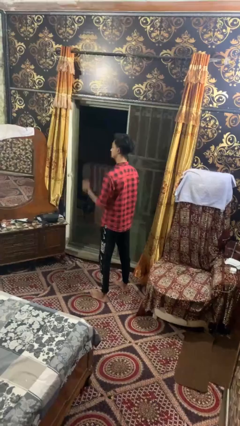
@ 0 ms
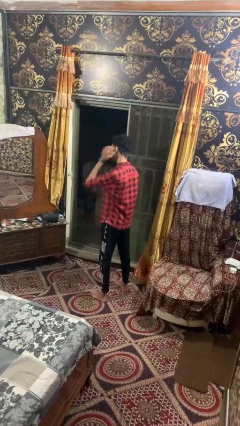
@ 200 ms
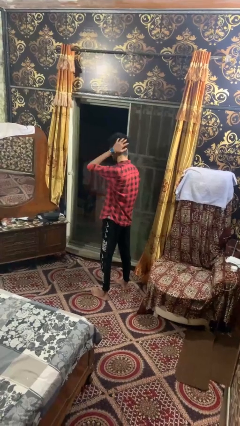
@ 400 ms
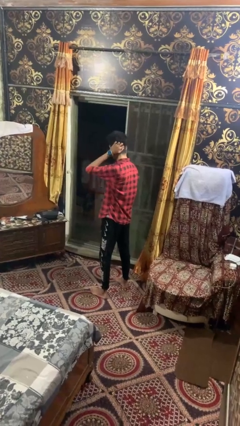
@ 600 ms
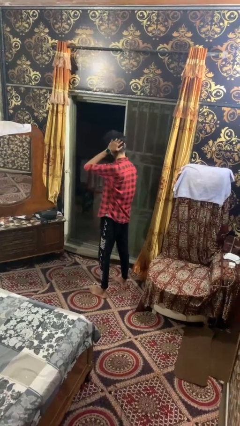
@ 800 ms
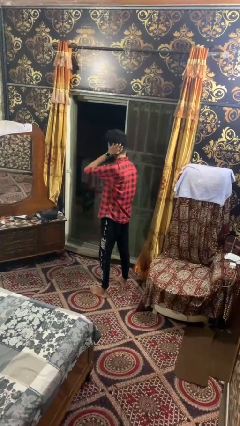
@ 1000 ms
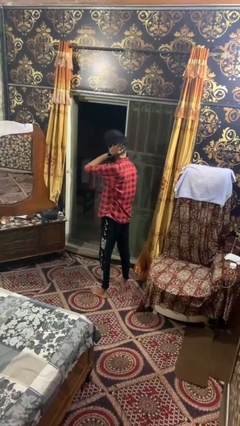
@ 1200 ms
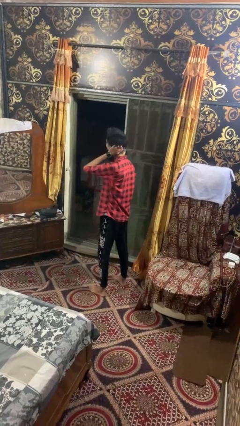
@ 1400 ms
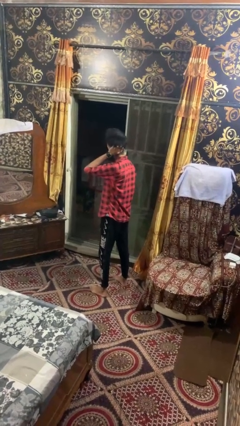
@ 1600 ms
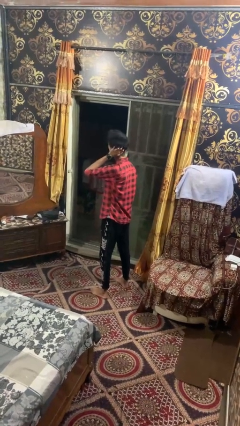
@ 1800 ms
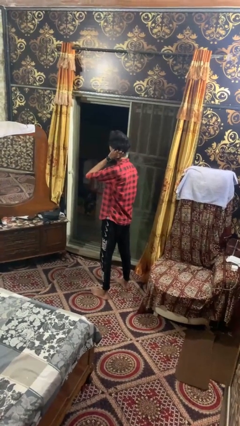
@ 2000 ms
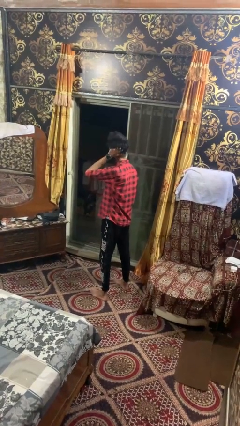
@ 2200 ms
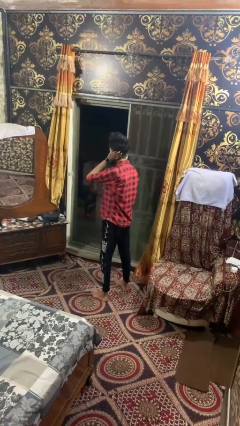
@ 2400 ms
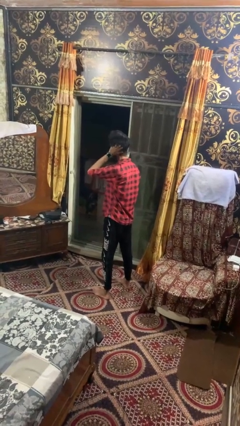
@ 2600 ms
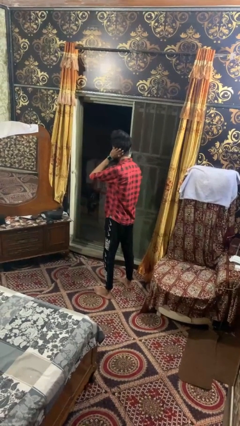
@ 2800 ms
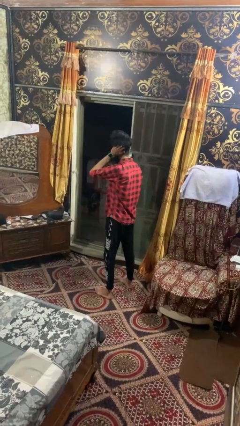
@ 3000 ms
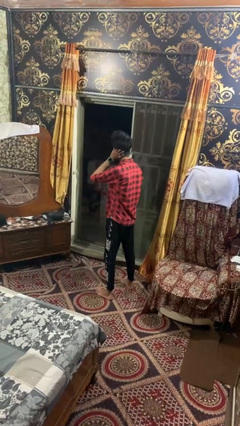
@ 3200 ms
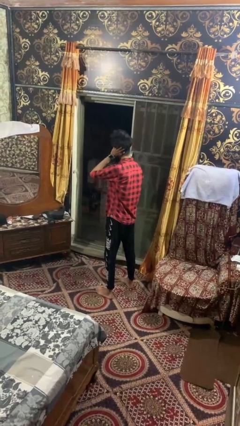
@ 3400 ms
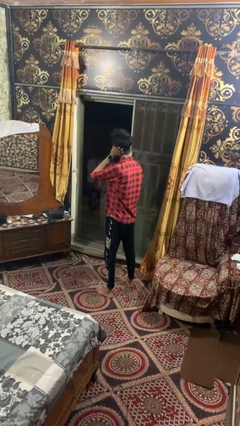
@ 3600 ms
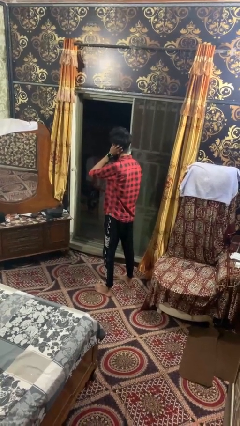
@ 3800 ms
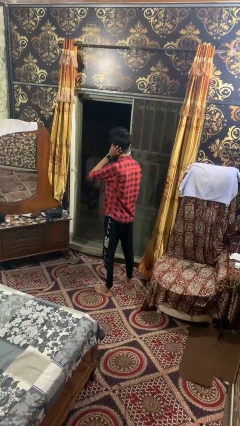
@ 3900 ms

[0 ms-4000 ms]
person scratches face

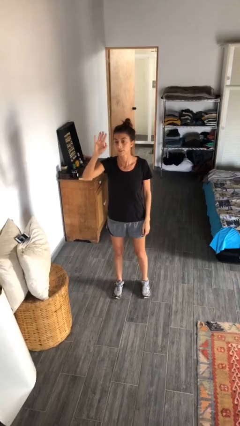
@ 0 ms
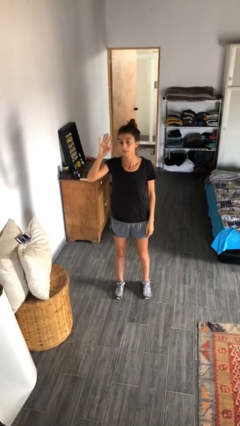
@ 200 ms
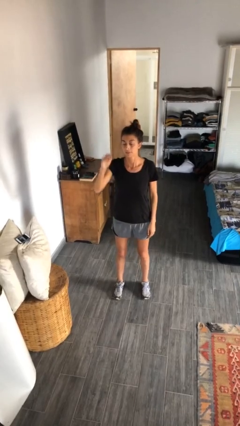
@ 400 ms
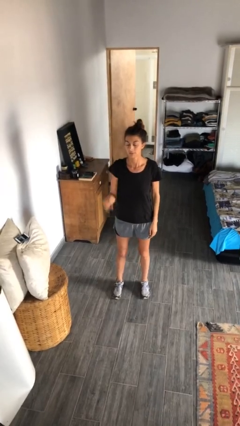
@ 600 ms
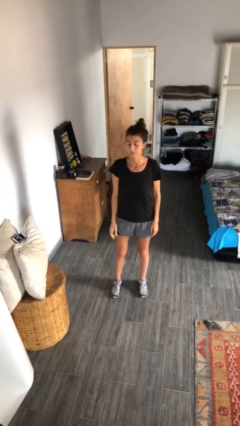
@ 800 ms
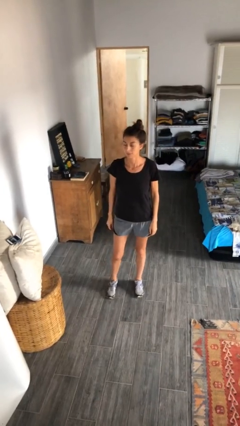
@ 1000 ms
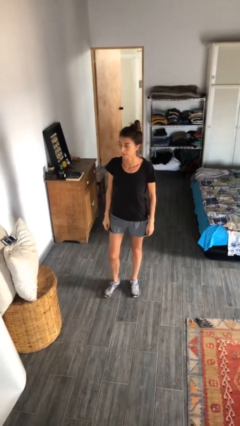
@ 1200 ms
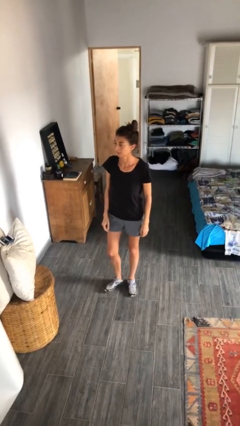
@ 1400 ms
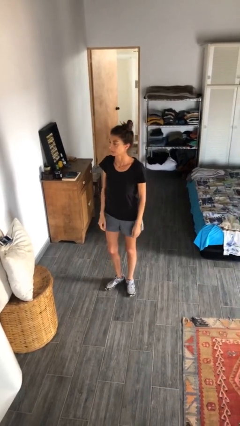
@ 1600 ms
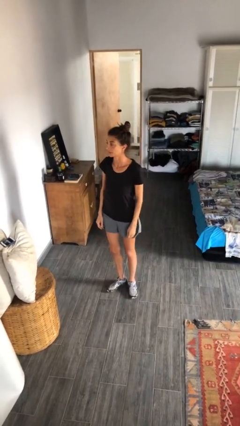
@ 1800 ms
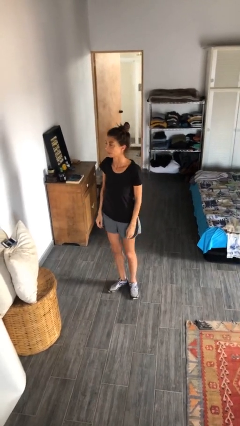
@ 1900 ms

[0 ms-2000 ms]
person gestures lower hand

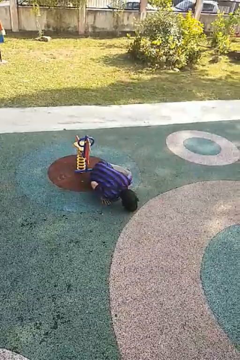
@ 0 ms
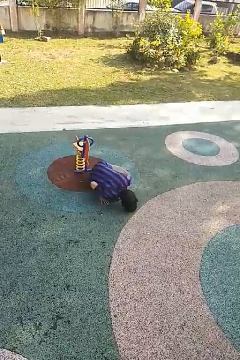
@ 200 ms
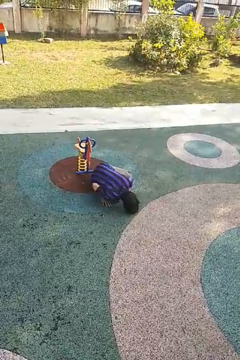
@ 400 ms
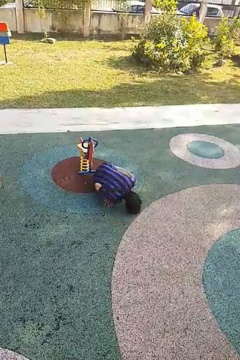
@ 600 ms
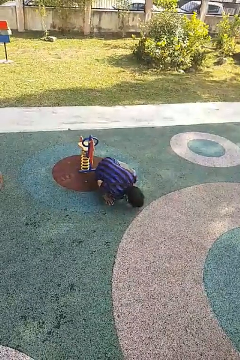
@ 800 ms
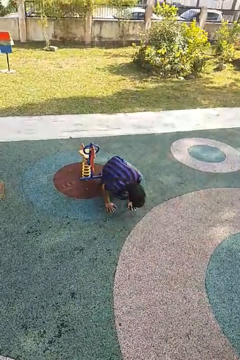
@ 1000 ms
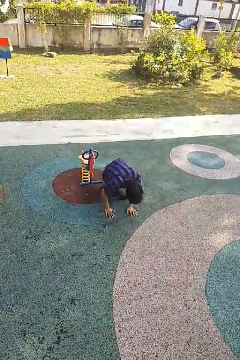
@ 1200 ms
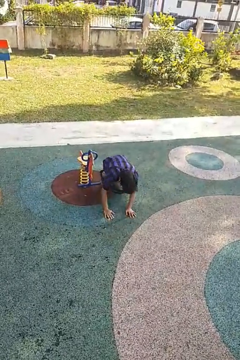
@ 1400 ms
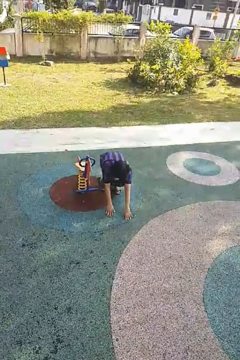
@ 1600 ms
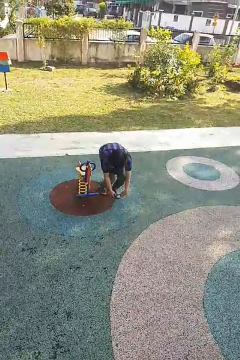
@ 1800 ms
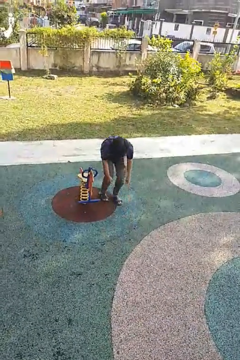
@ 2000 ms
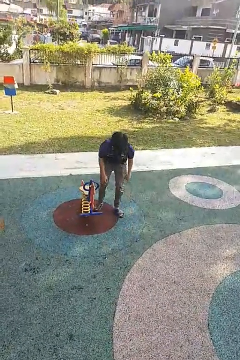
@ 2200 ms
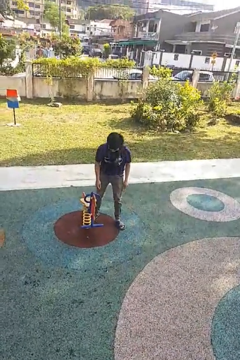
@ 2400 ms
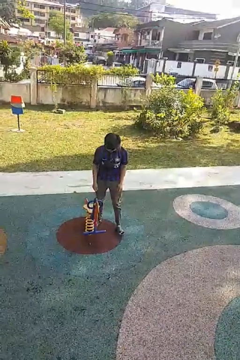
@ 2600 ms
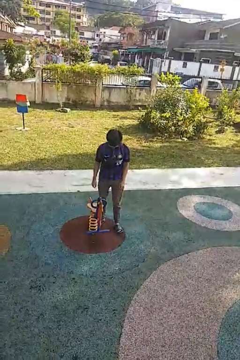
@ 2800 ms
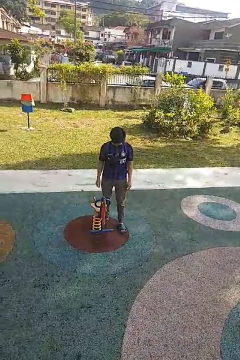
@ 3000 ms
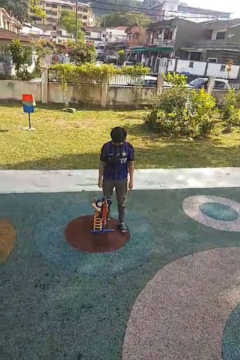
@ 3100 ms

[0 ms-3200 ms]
person stands up from floor

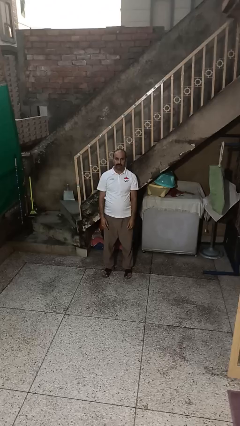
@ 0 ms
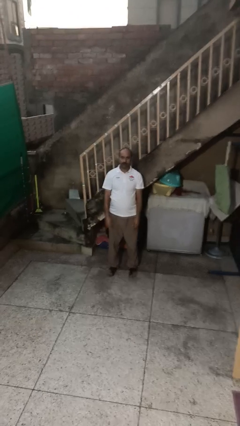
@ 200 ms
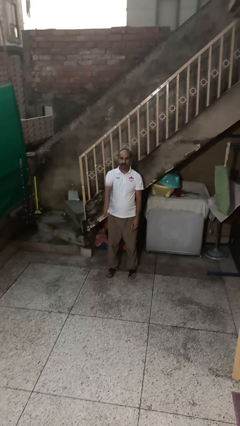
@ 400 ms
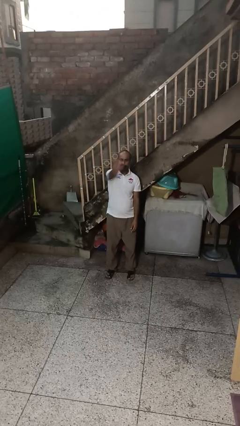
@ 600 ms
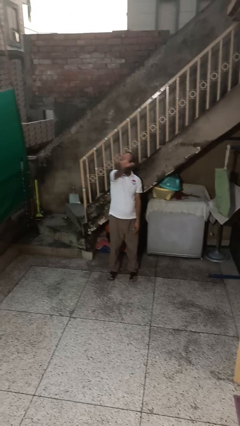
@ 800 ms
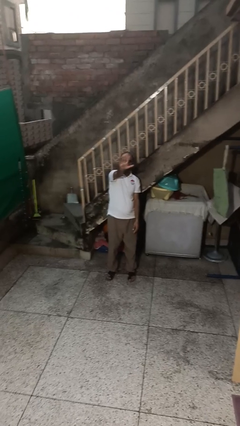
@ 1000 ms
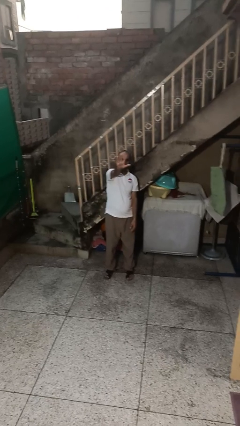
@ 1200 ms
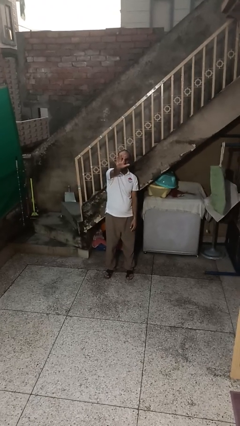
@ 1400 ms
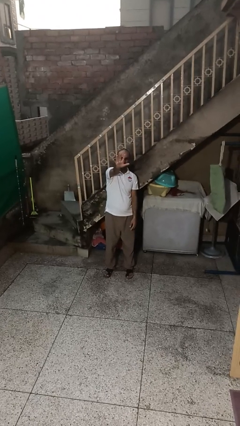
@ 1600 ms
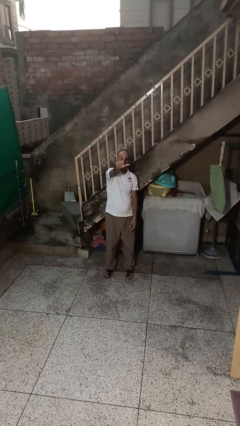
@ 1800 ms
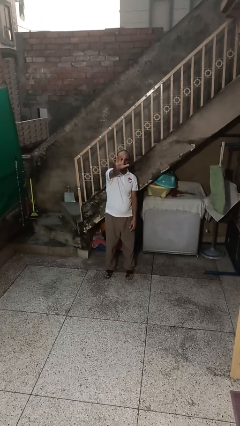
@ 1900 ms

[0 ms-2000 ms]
person gestures number five

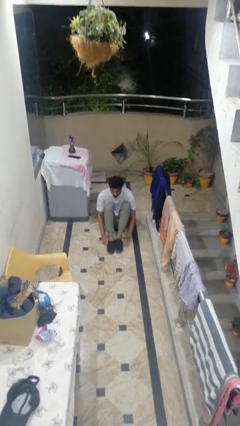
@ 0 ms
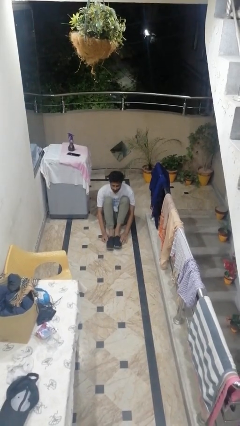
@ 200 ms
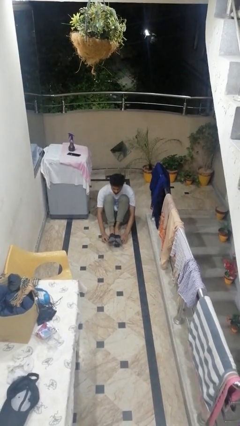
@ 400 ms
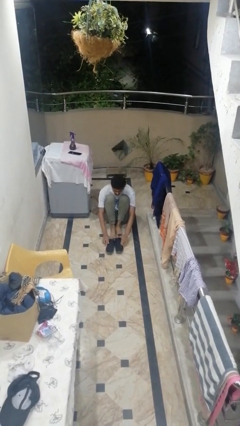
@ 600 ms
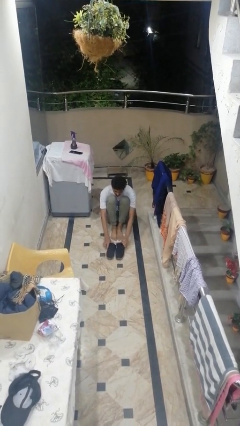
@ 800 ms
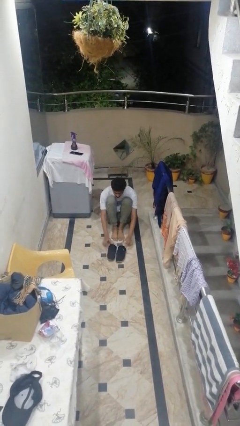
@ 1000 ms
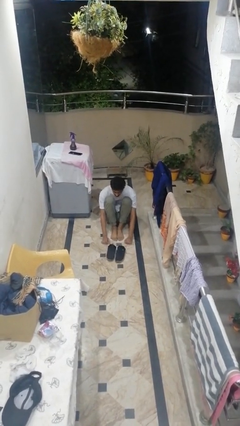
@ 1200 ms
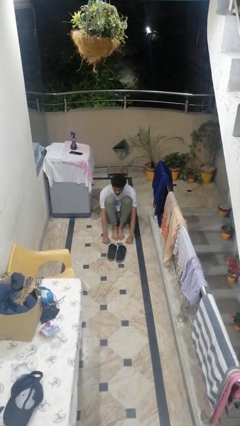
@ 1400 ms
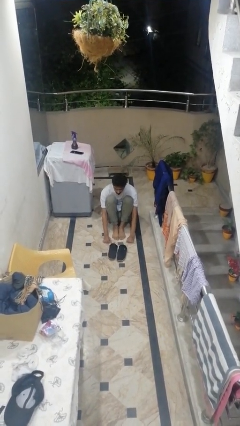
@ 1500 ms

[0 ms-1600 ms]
person takes off shoes

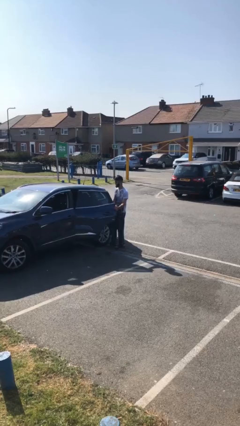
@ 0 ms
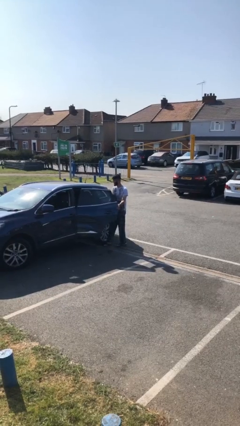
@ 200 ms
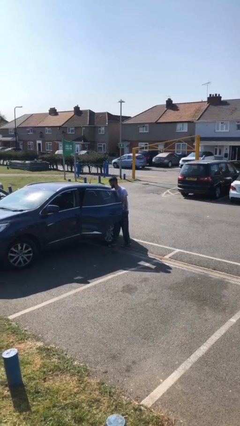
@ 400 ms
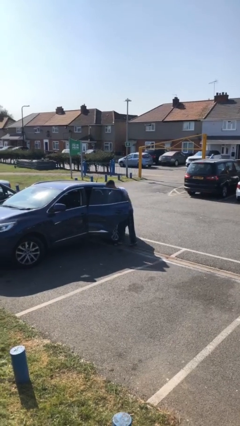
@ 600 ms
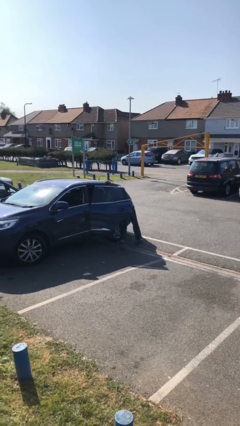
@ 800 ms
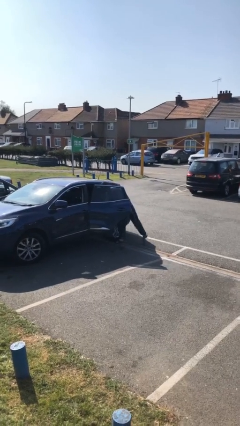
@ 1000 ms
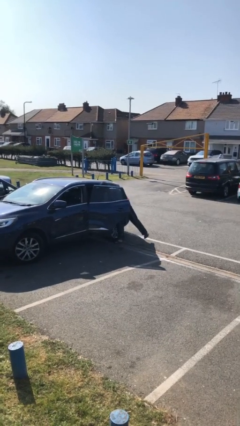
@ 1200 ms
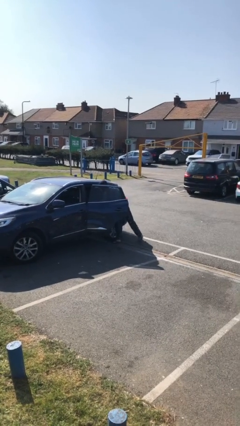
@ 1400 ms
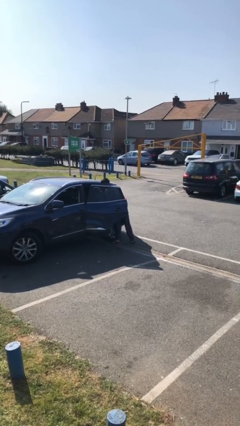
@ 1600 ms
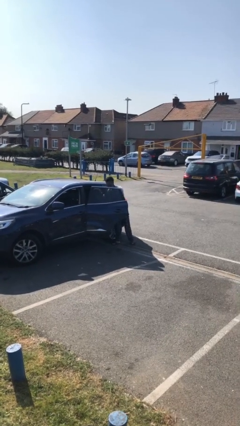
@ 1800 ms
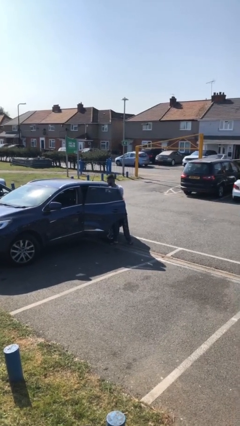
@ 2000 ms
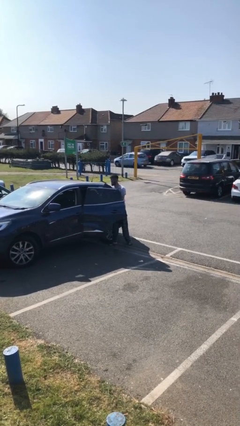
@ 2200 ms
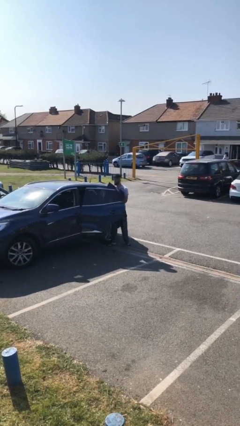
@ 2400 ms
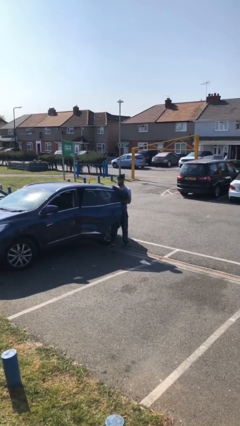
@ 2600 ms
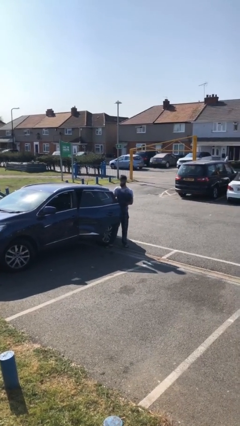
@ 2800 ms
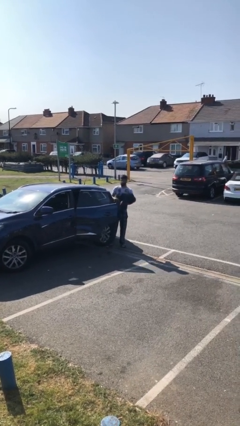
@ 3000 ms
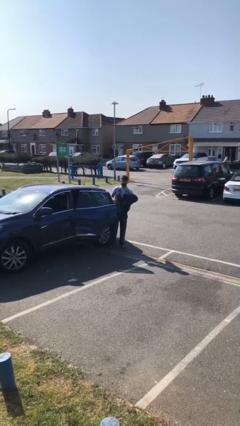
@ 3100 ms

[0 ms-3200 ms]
person unloads car

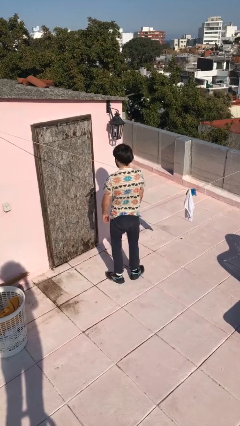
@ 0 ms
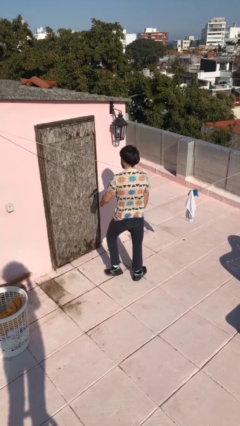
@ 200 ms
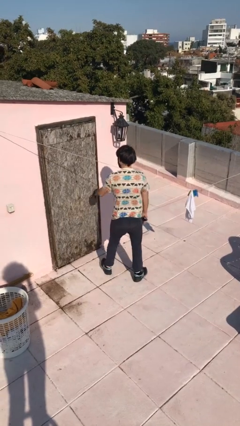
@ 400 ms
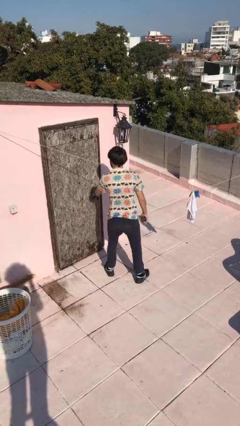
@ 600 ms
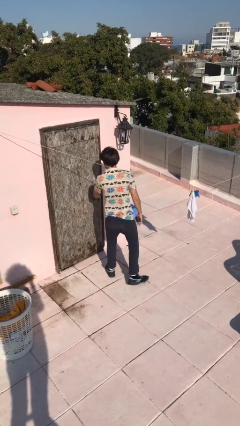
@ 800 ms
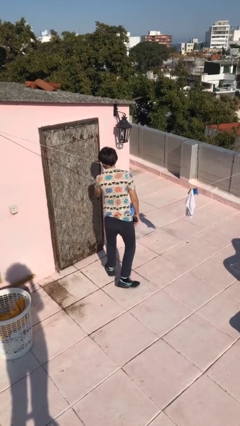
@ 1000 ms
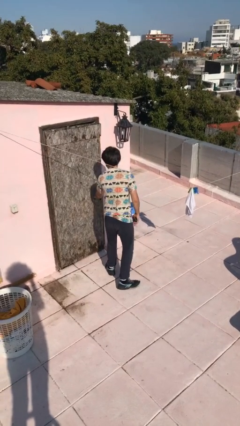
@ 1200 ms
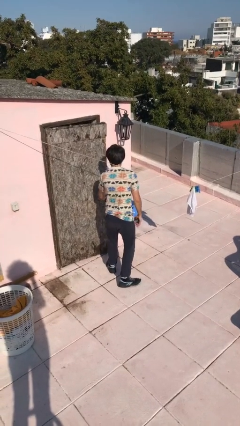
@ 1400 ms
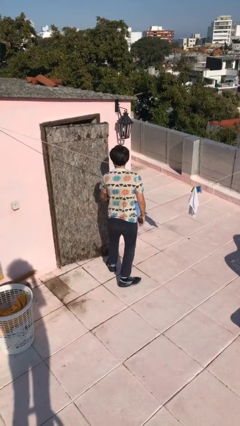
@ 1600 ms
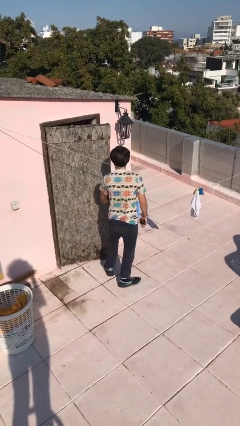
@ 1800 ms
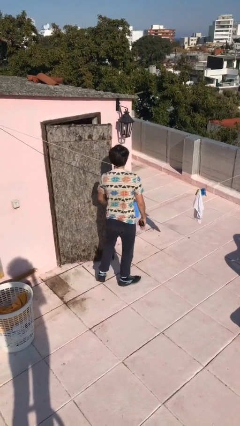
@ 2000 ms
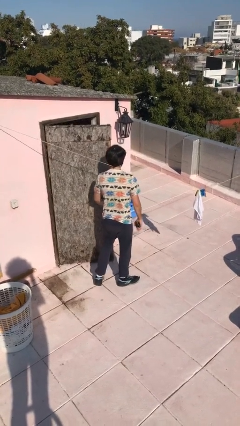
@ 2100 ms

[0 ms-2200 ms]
person opens facility door
